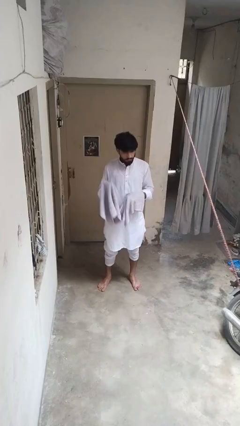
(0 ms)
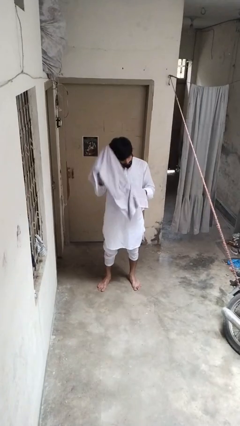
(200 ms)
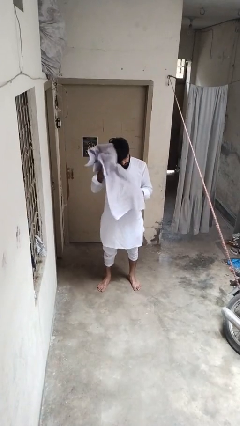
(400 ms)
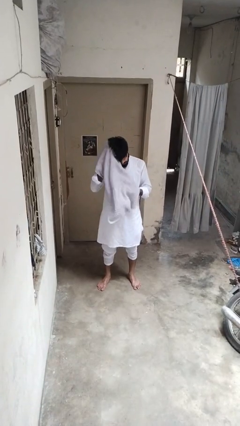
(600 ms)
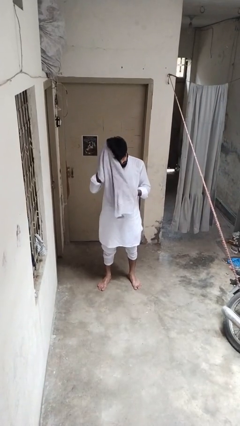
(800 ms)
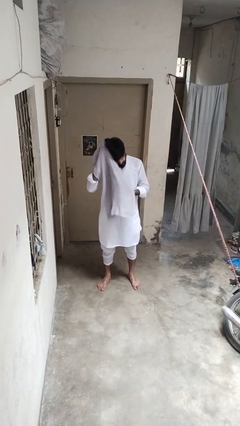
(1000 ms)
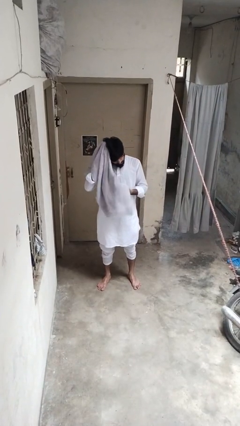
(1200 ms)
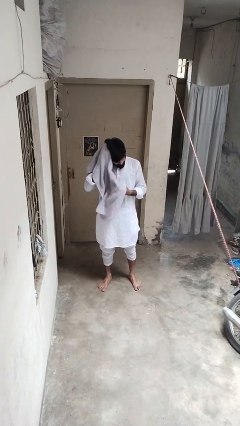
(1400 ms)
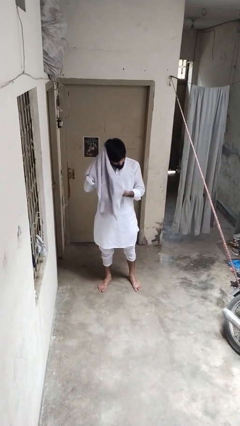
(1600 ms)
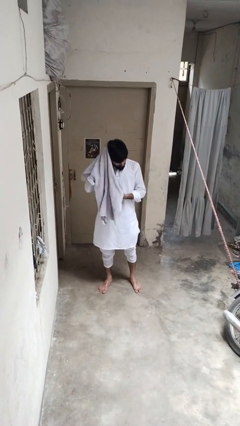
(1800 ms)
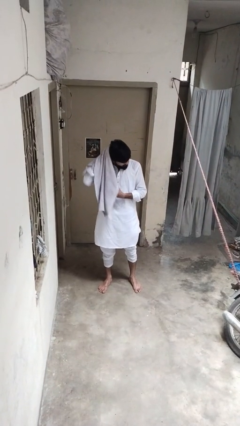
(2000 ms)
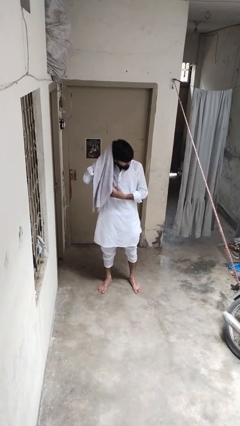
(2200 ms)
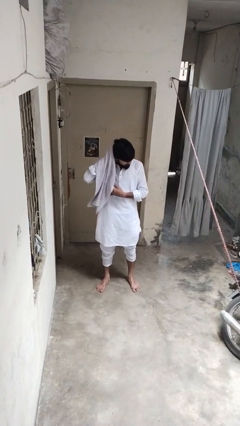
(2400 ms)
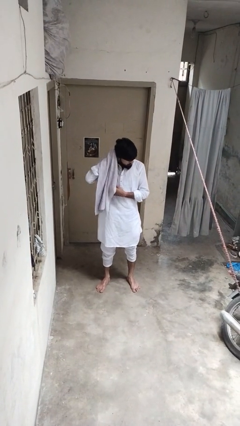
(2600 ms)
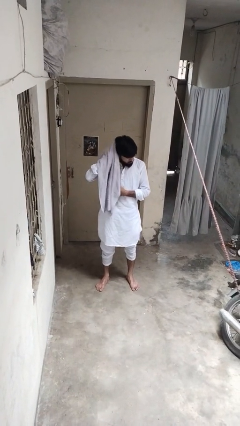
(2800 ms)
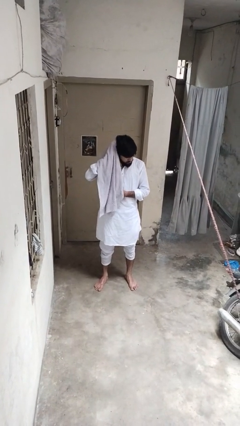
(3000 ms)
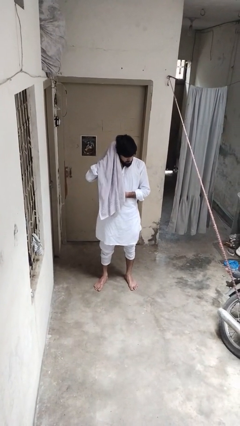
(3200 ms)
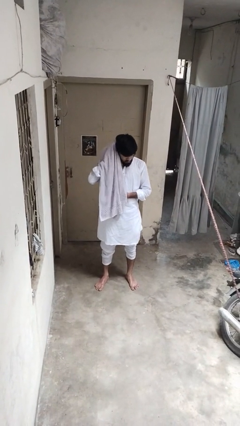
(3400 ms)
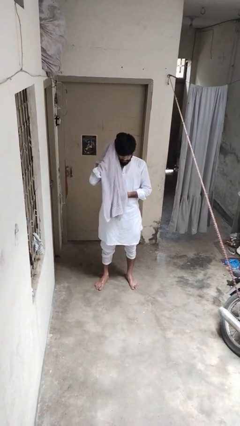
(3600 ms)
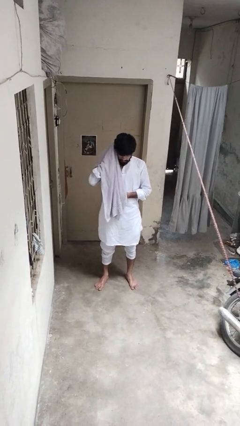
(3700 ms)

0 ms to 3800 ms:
person dries hair with towel

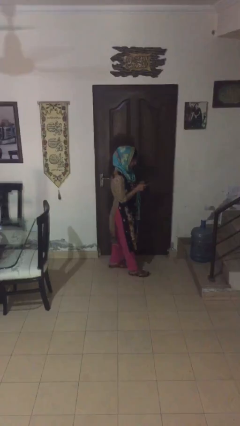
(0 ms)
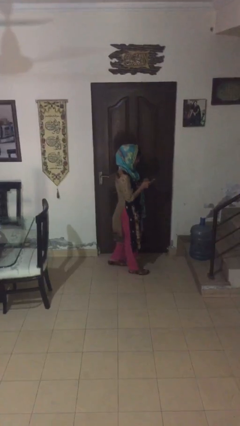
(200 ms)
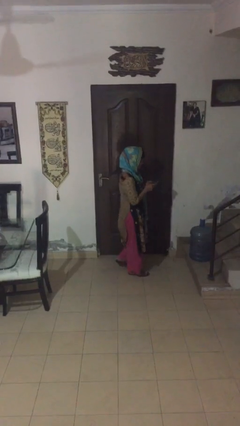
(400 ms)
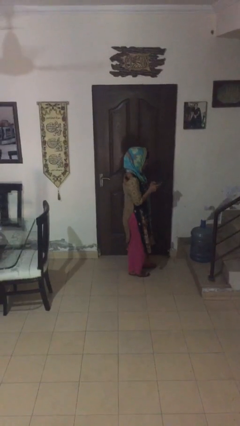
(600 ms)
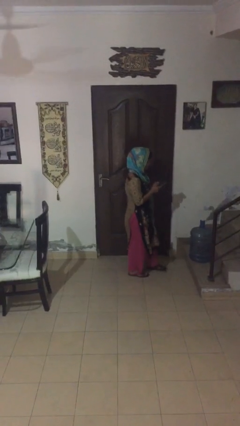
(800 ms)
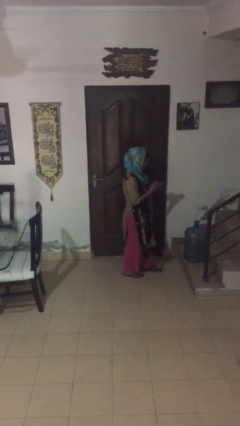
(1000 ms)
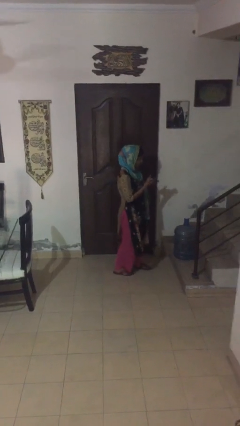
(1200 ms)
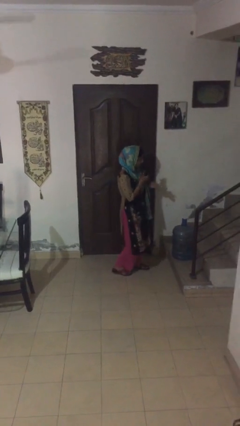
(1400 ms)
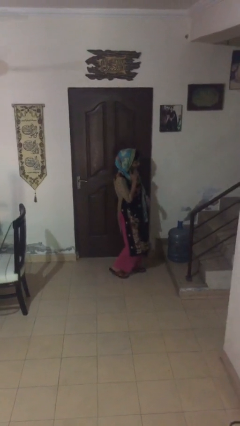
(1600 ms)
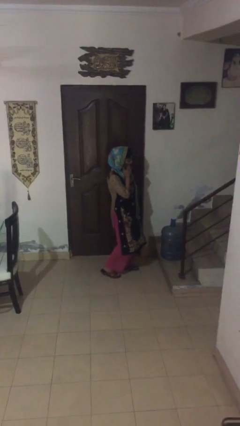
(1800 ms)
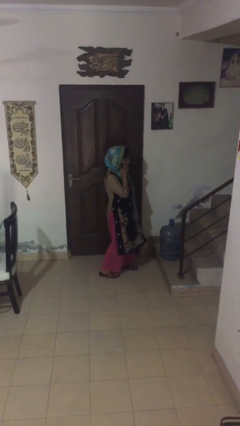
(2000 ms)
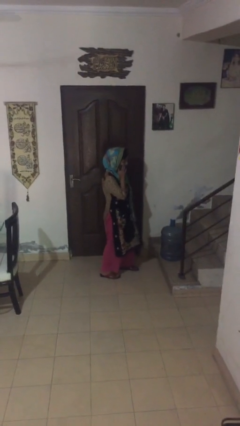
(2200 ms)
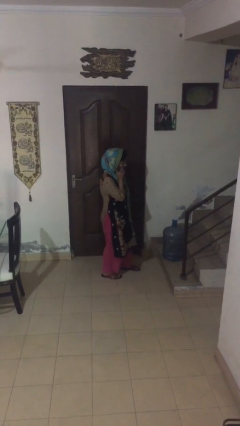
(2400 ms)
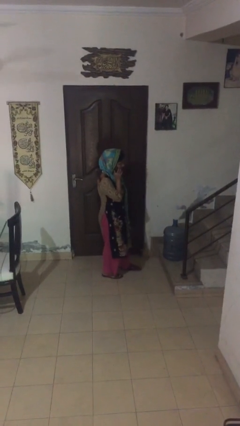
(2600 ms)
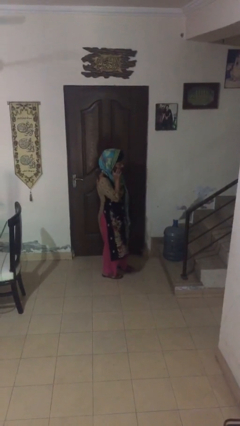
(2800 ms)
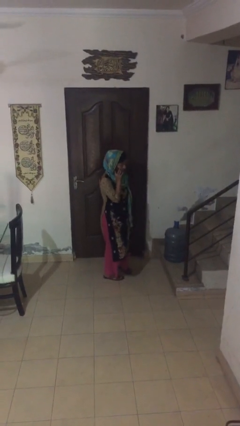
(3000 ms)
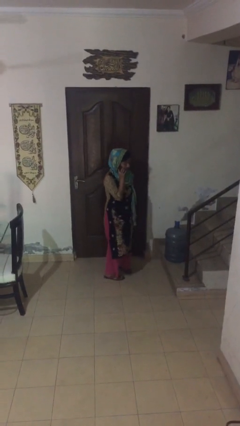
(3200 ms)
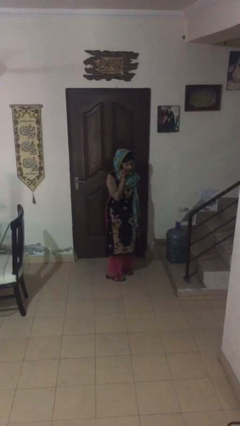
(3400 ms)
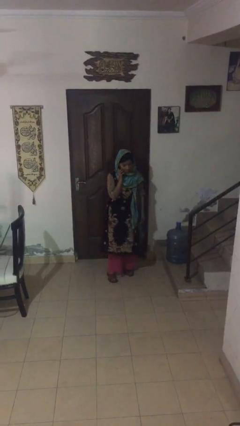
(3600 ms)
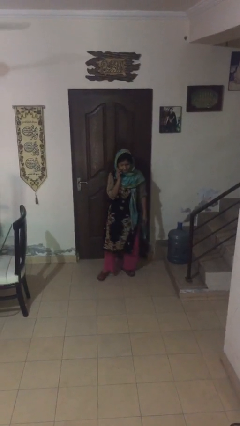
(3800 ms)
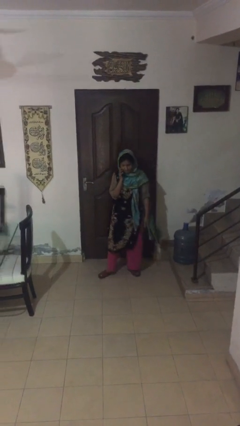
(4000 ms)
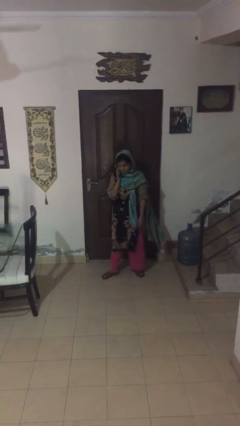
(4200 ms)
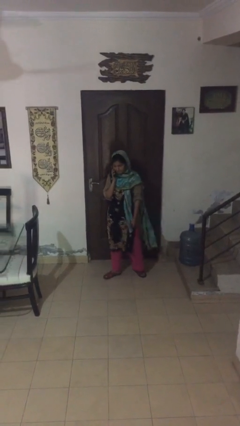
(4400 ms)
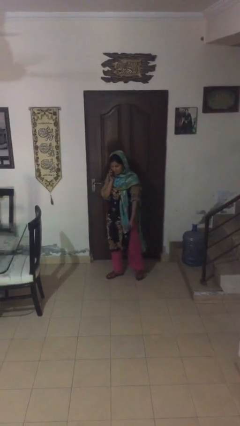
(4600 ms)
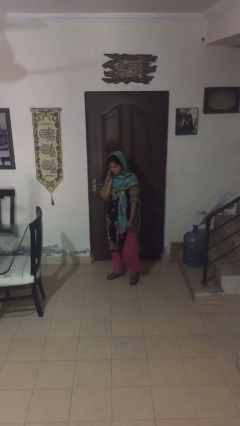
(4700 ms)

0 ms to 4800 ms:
person talks on phone

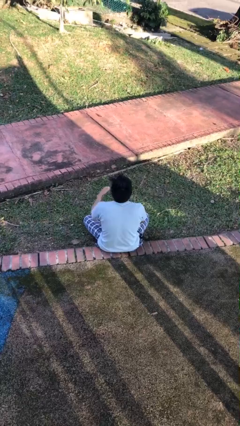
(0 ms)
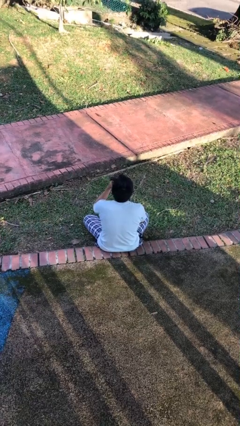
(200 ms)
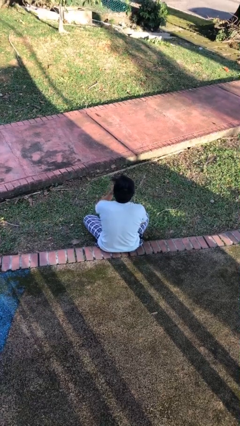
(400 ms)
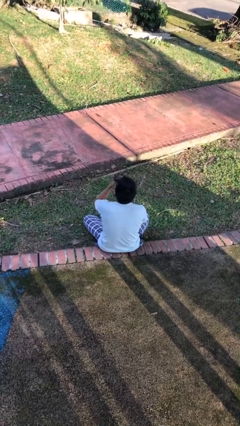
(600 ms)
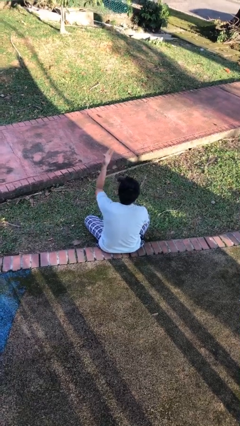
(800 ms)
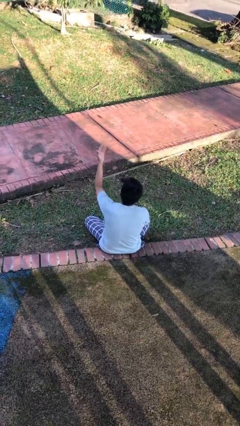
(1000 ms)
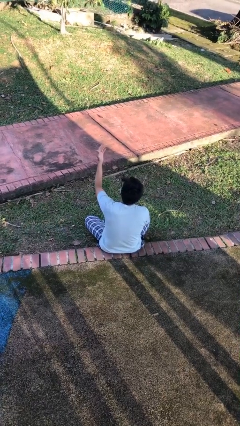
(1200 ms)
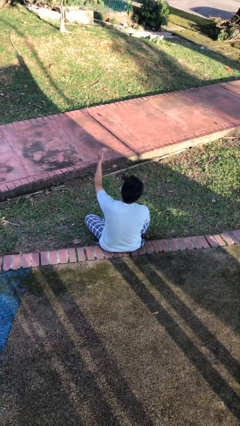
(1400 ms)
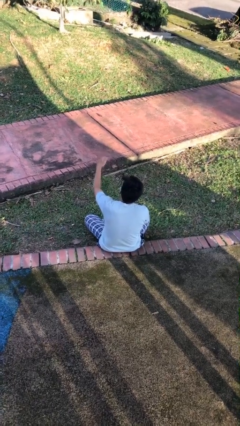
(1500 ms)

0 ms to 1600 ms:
person gestures blow kiss

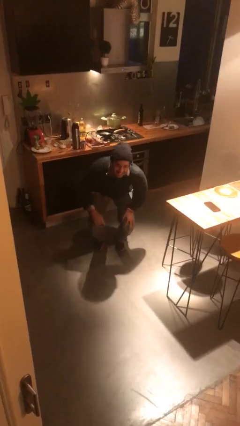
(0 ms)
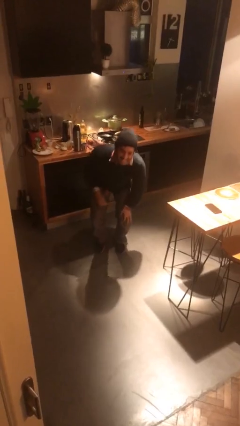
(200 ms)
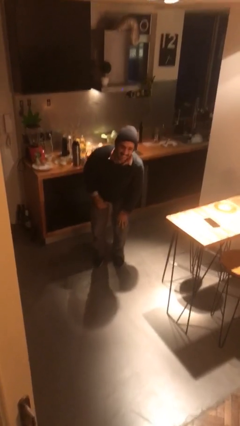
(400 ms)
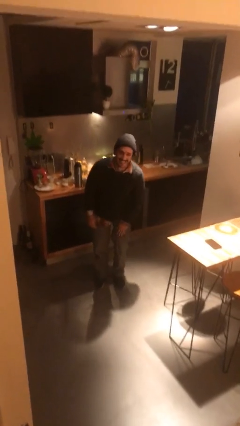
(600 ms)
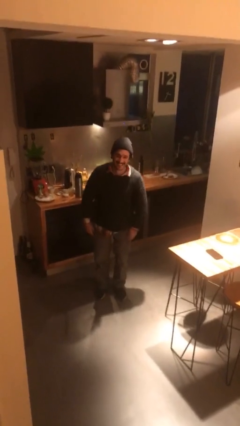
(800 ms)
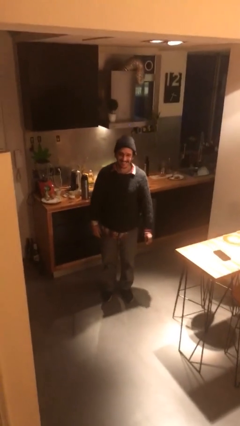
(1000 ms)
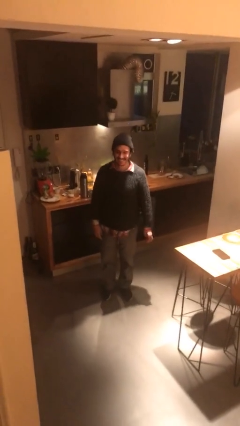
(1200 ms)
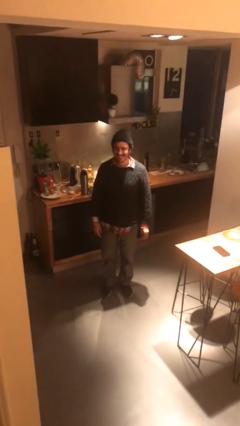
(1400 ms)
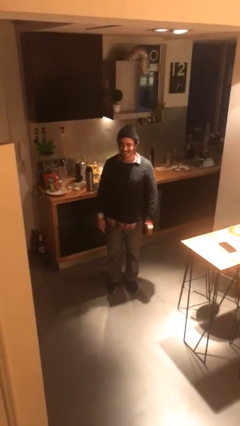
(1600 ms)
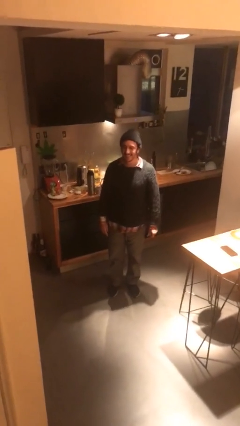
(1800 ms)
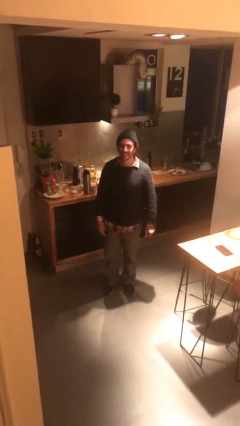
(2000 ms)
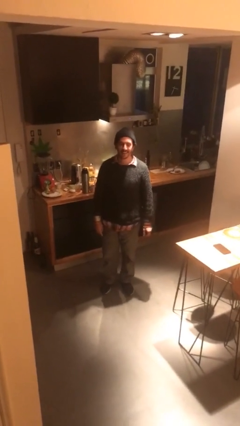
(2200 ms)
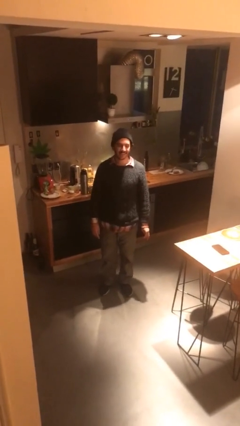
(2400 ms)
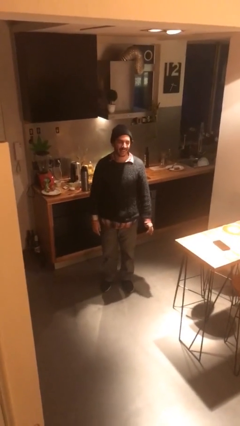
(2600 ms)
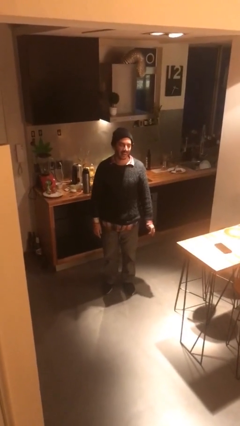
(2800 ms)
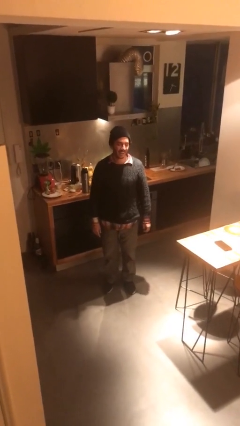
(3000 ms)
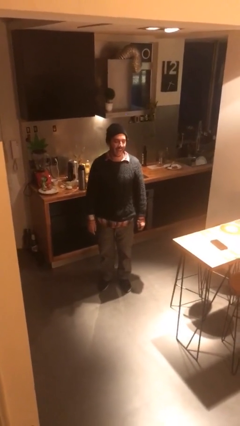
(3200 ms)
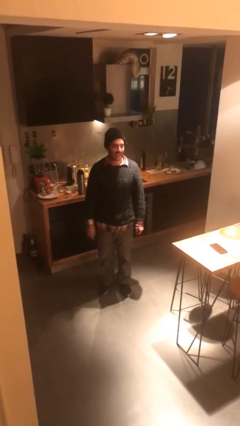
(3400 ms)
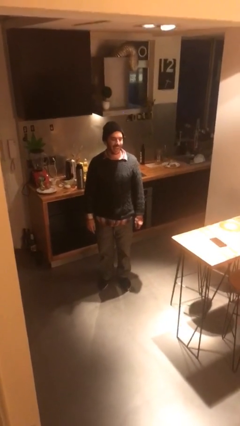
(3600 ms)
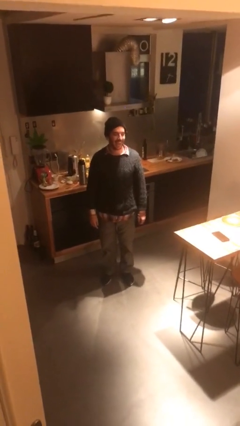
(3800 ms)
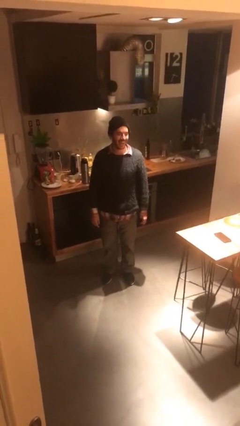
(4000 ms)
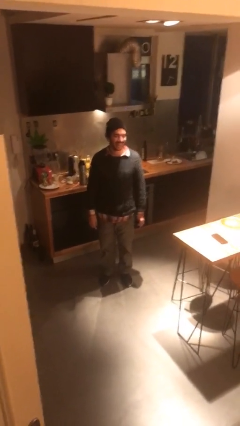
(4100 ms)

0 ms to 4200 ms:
person stands up

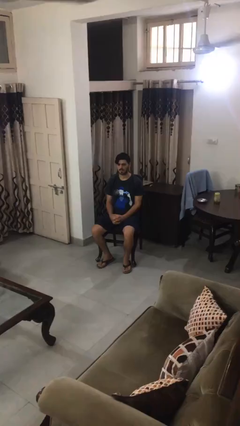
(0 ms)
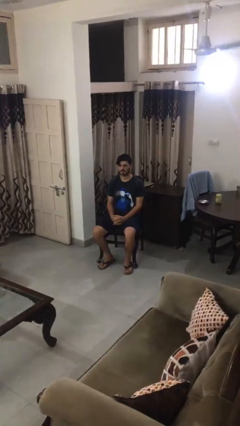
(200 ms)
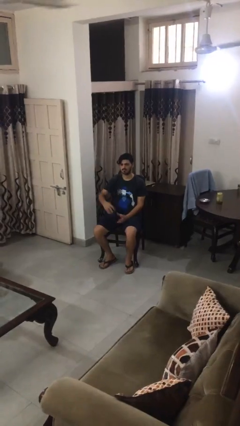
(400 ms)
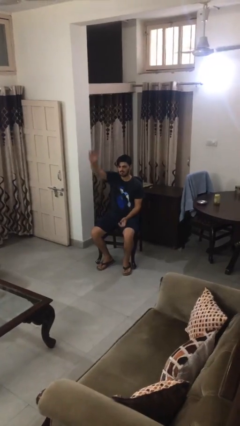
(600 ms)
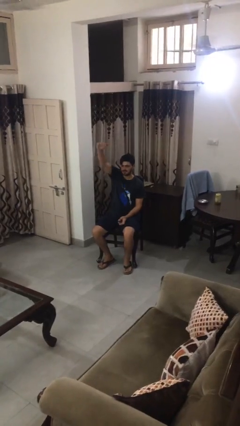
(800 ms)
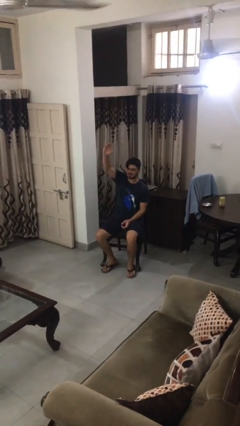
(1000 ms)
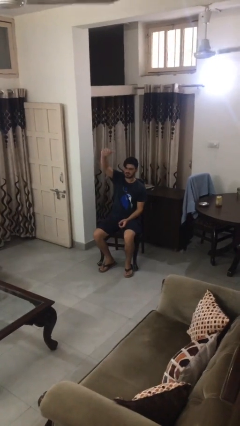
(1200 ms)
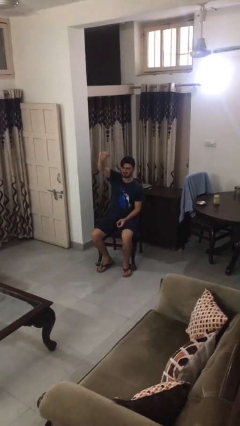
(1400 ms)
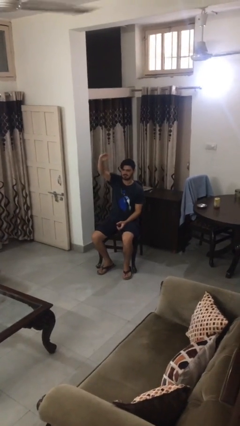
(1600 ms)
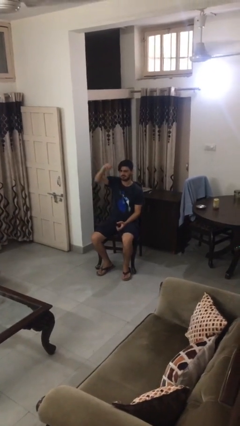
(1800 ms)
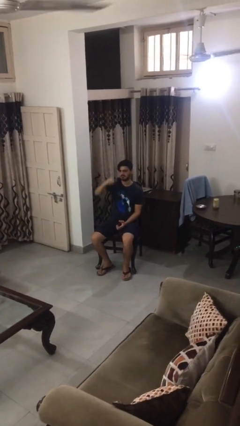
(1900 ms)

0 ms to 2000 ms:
person gestures come here

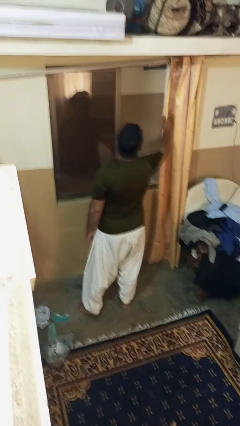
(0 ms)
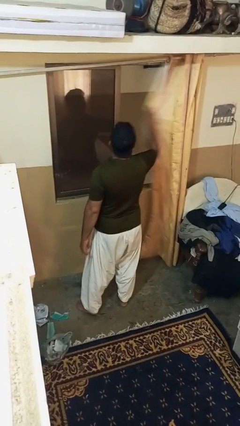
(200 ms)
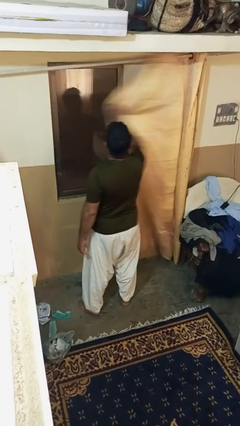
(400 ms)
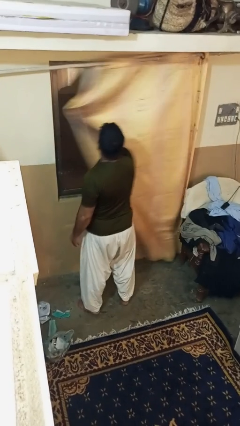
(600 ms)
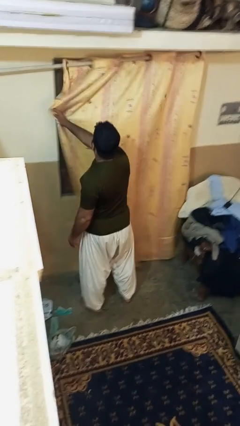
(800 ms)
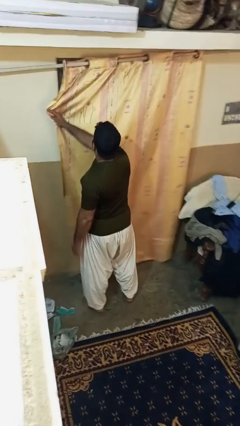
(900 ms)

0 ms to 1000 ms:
person closes curtains
